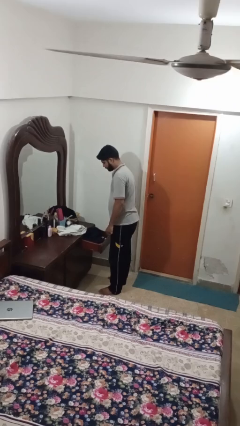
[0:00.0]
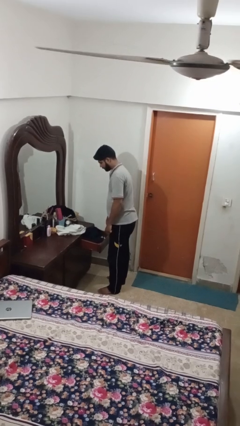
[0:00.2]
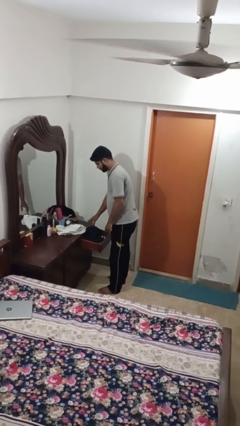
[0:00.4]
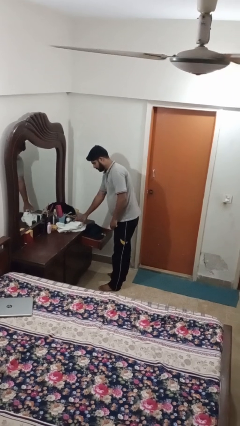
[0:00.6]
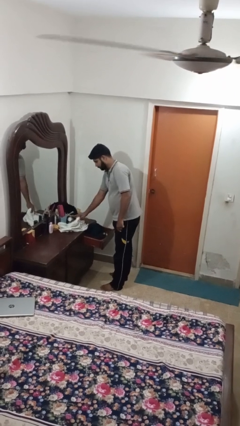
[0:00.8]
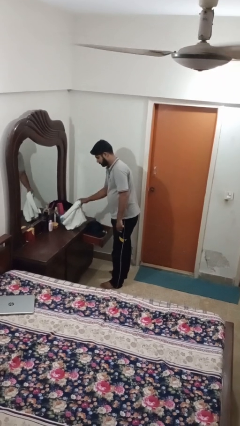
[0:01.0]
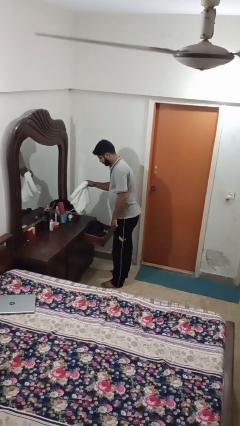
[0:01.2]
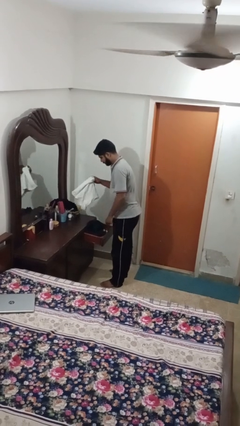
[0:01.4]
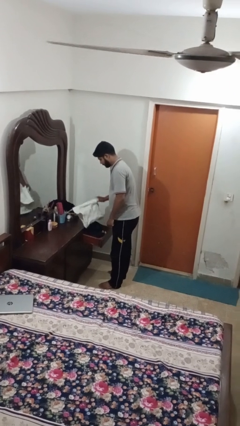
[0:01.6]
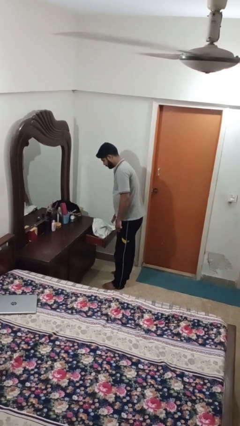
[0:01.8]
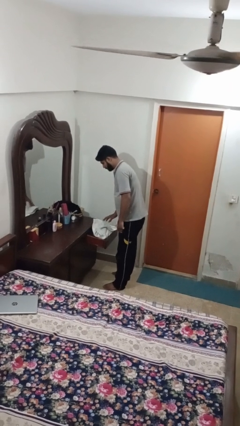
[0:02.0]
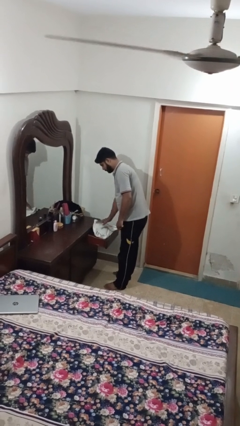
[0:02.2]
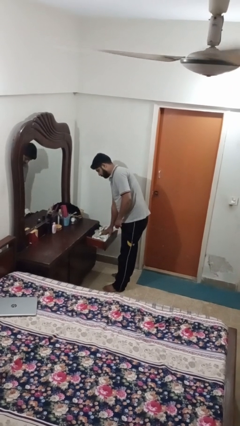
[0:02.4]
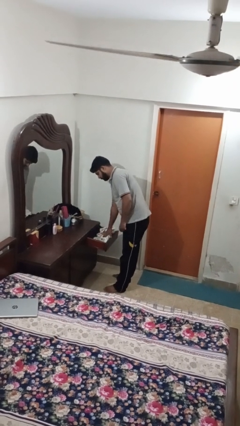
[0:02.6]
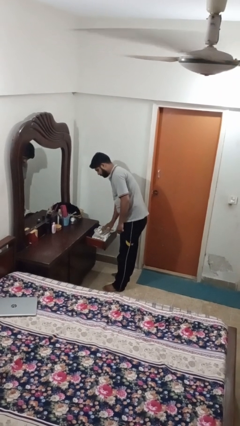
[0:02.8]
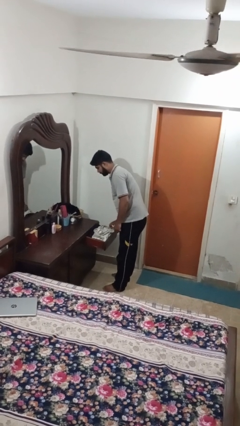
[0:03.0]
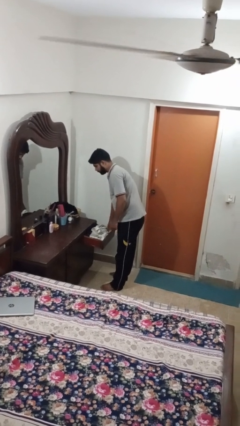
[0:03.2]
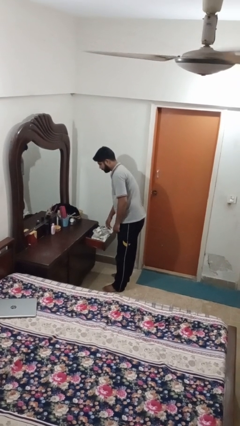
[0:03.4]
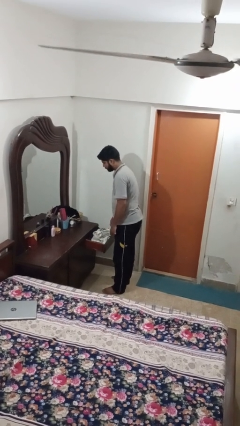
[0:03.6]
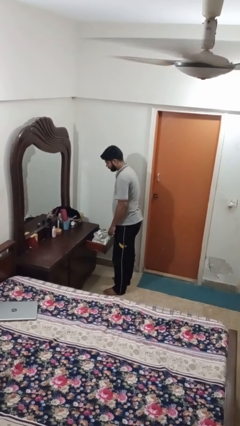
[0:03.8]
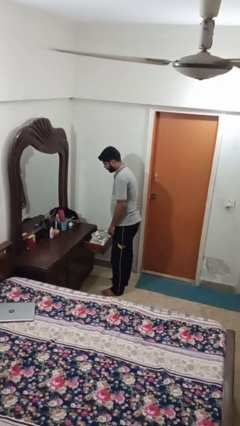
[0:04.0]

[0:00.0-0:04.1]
person puts clothes into dresser

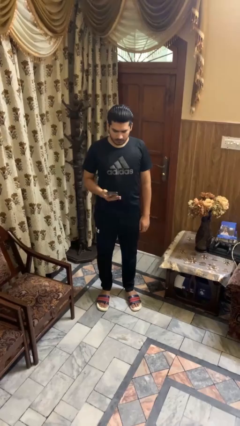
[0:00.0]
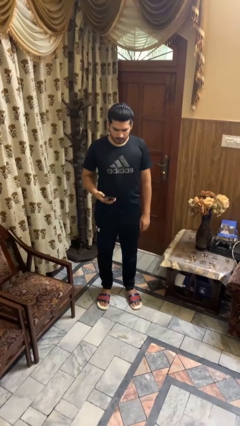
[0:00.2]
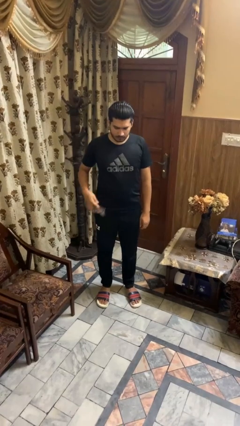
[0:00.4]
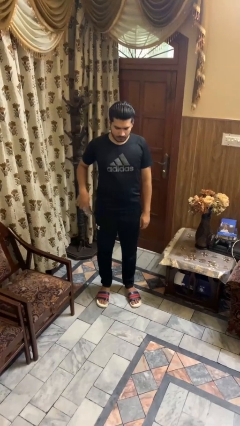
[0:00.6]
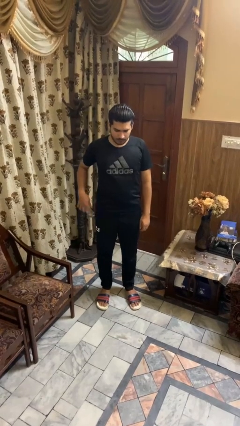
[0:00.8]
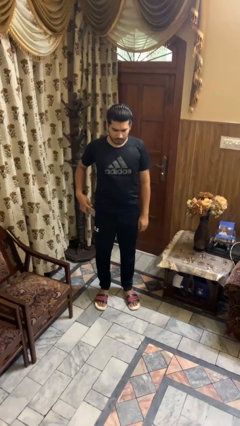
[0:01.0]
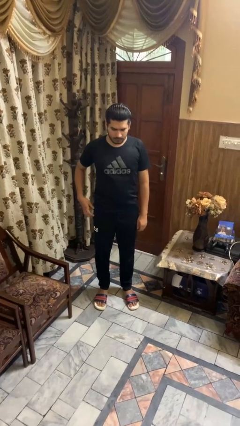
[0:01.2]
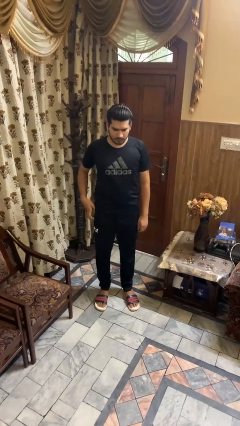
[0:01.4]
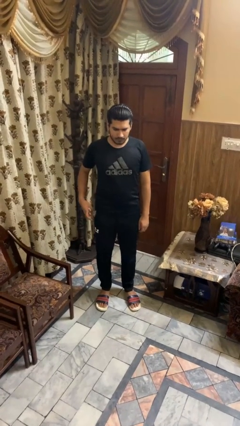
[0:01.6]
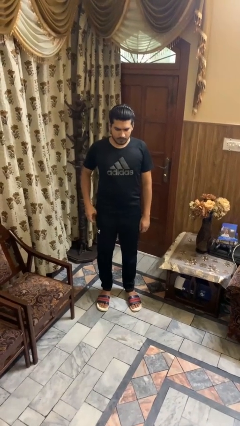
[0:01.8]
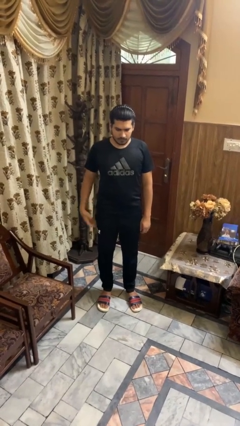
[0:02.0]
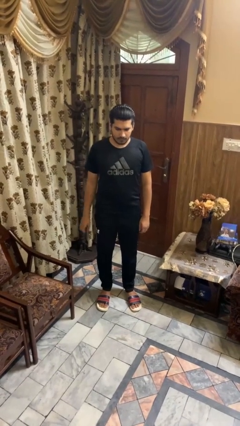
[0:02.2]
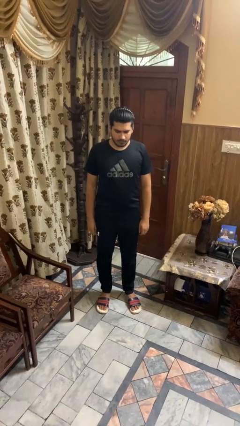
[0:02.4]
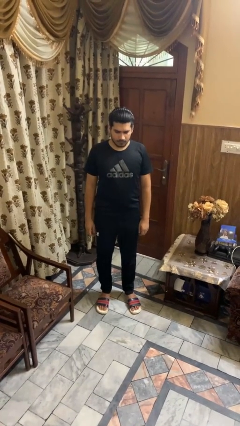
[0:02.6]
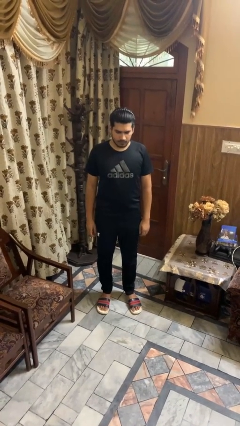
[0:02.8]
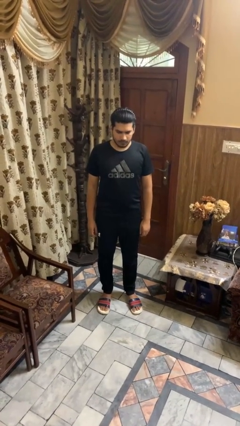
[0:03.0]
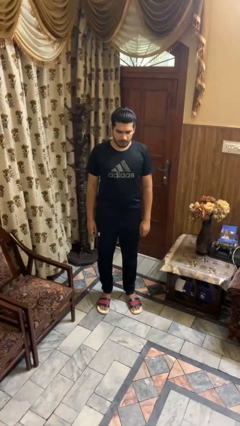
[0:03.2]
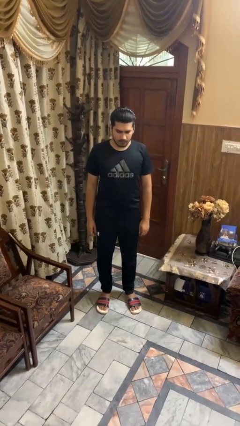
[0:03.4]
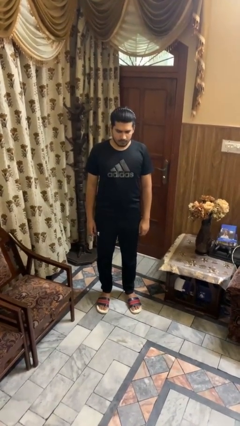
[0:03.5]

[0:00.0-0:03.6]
person puts phone into pocket

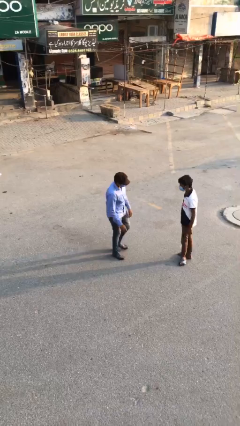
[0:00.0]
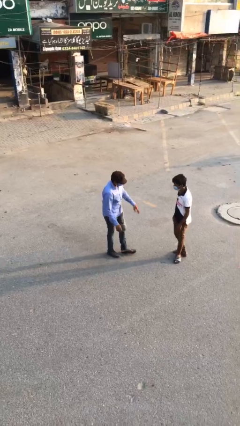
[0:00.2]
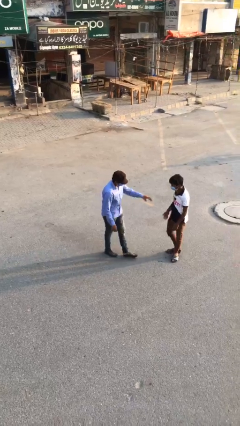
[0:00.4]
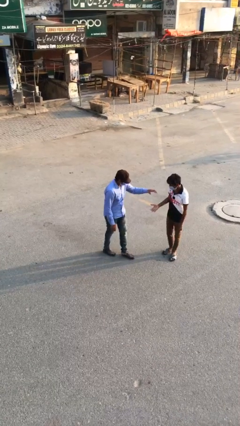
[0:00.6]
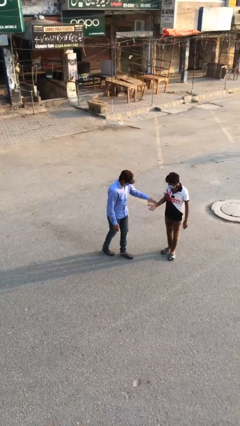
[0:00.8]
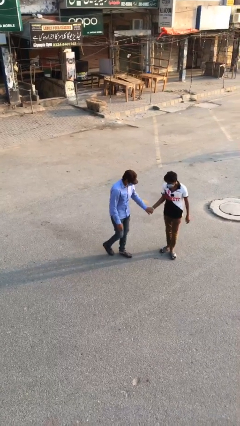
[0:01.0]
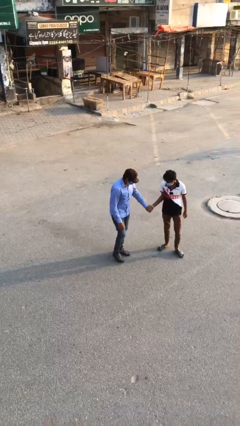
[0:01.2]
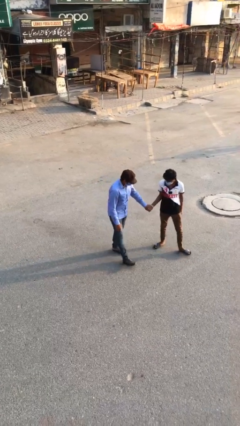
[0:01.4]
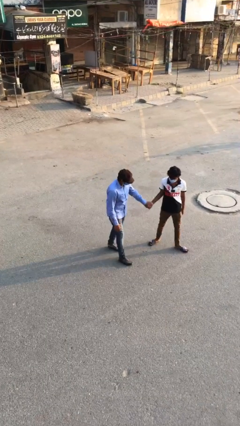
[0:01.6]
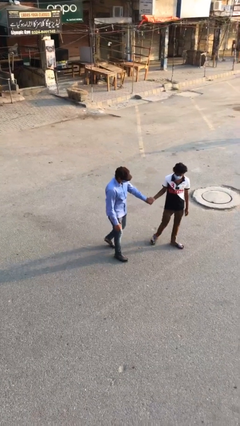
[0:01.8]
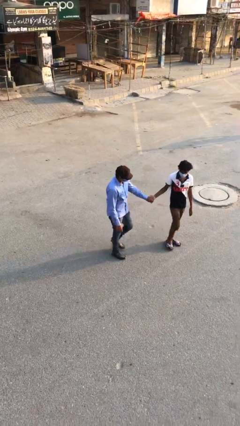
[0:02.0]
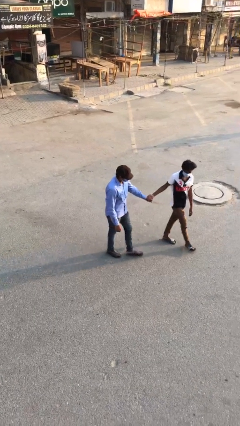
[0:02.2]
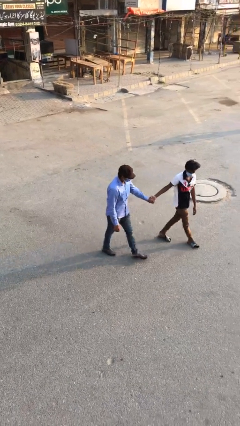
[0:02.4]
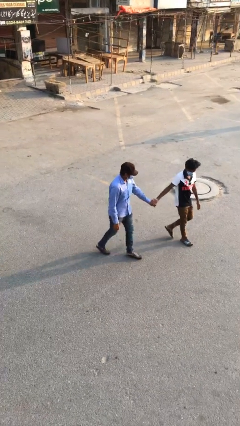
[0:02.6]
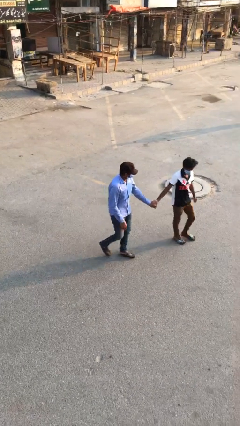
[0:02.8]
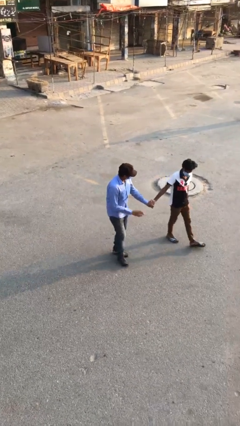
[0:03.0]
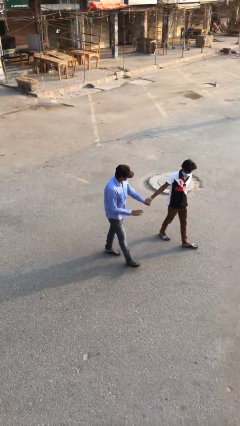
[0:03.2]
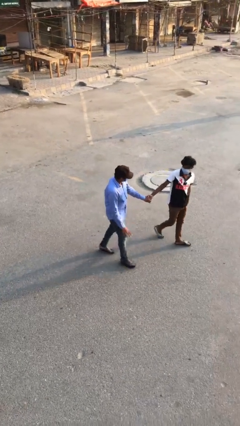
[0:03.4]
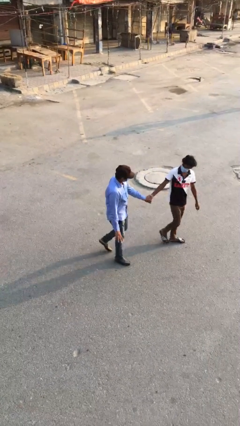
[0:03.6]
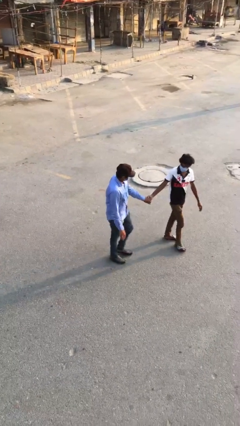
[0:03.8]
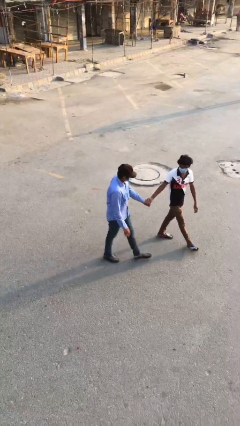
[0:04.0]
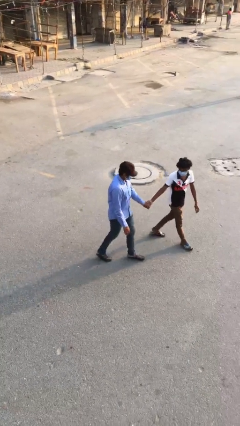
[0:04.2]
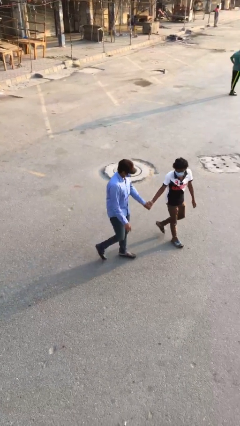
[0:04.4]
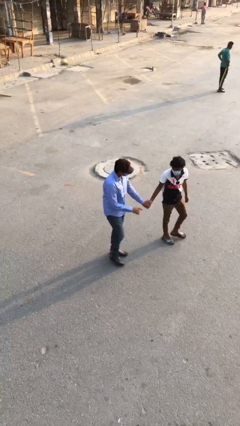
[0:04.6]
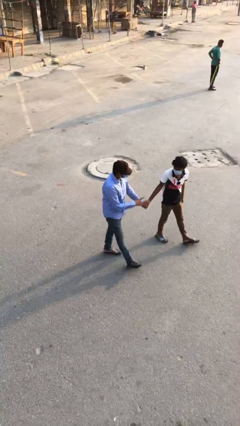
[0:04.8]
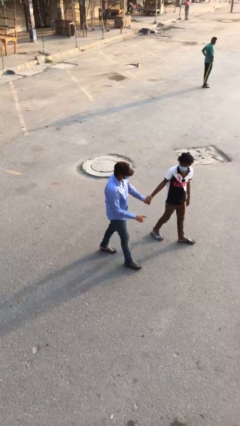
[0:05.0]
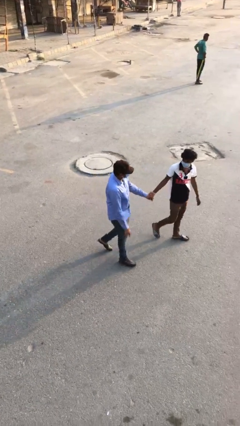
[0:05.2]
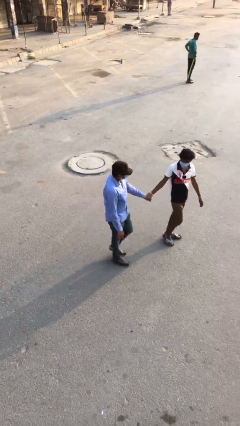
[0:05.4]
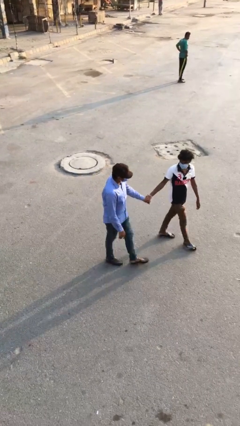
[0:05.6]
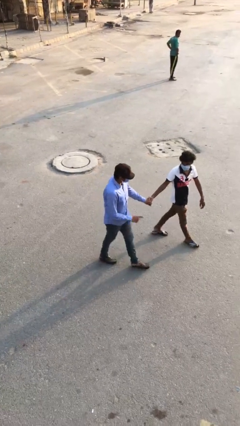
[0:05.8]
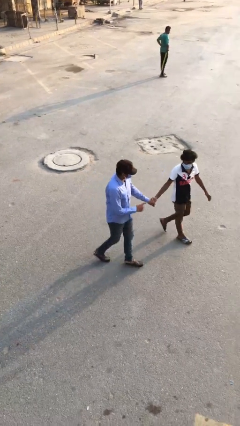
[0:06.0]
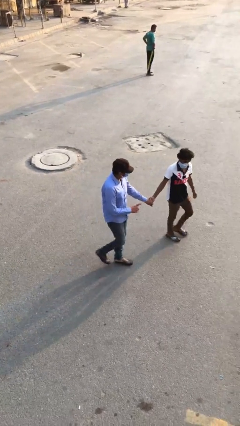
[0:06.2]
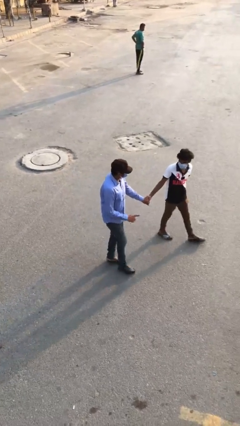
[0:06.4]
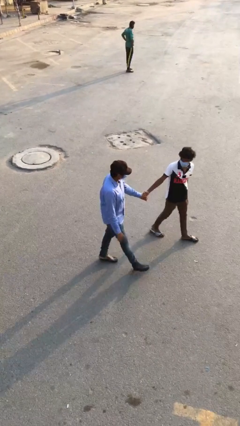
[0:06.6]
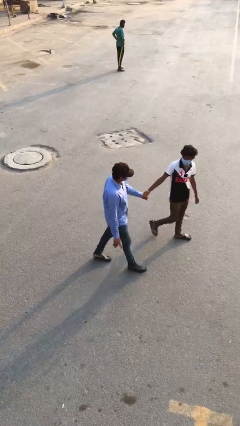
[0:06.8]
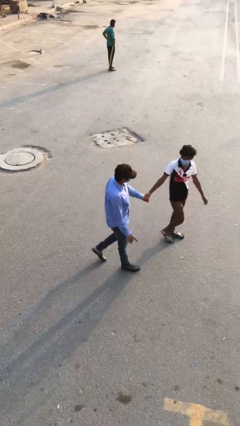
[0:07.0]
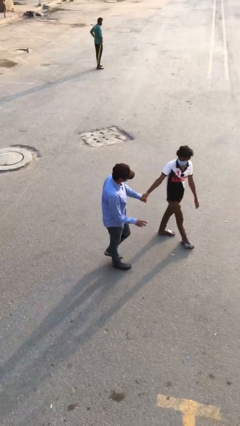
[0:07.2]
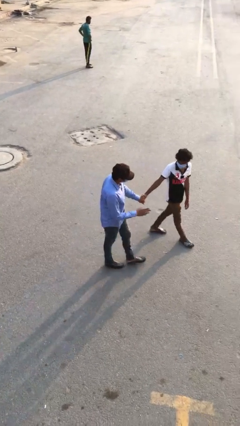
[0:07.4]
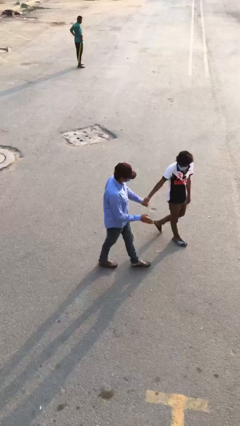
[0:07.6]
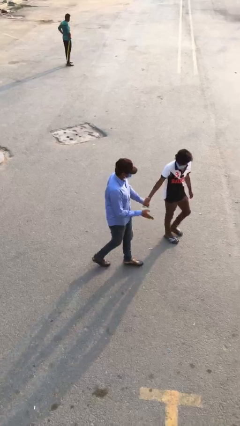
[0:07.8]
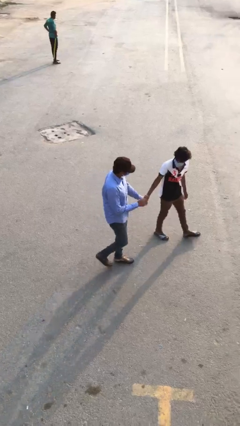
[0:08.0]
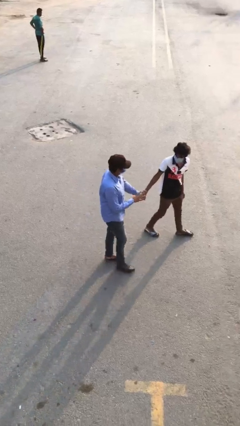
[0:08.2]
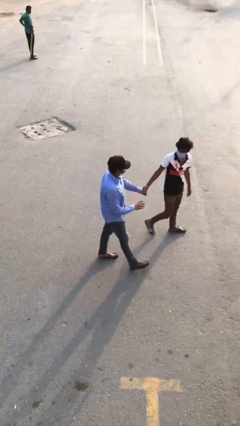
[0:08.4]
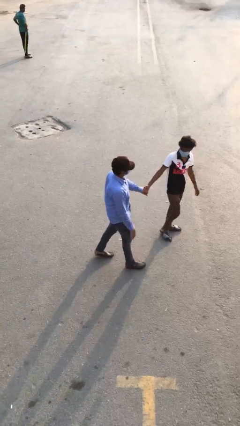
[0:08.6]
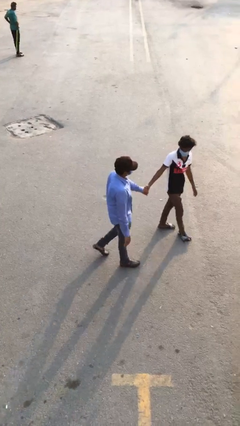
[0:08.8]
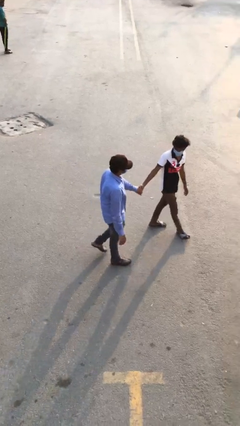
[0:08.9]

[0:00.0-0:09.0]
person holds hand

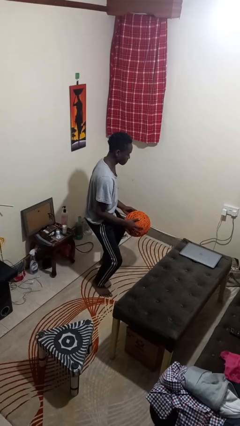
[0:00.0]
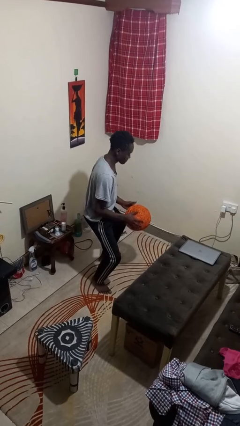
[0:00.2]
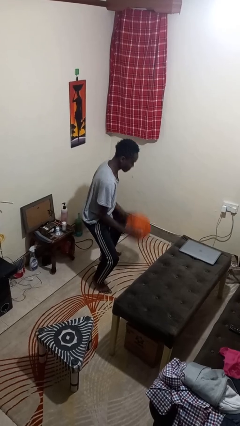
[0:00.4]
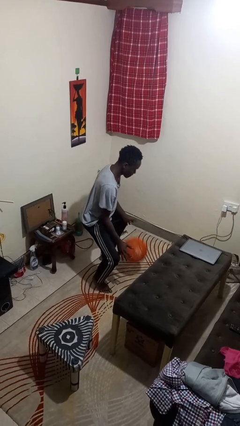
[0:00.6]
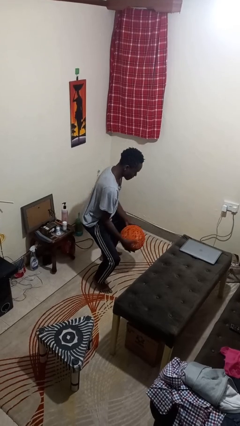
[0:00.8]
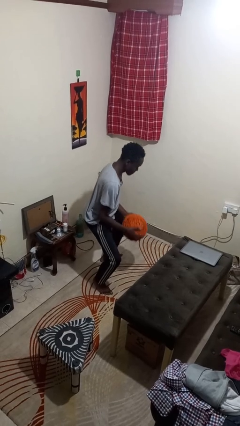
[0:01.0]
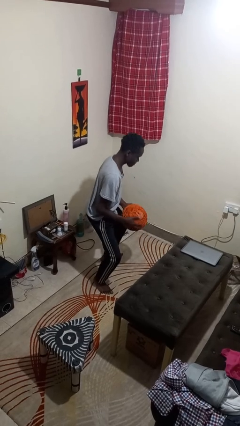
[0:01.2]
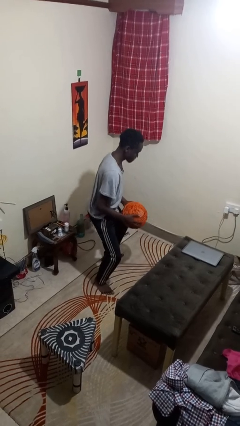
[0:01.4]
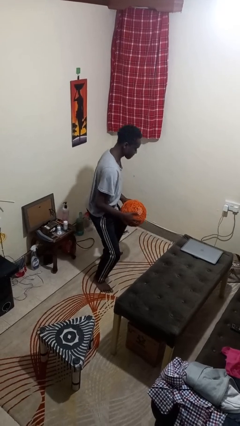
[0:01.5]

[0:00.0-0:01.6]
person bounces ball on floor
